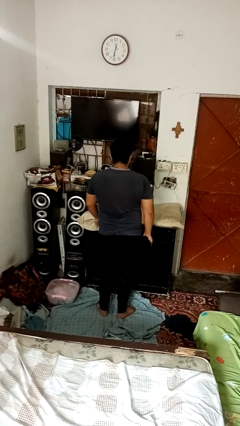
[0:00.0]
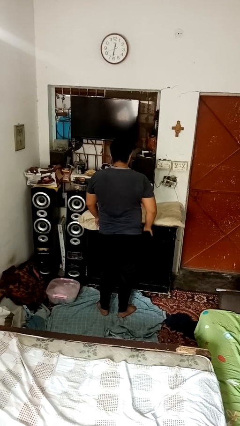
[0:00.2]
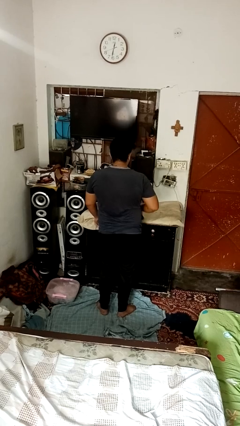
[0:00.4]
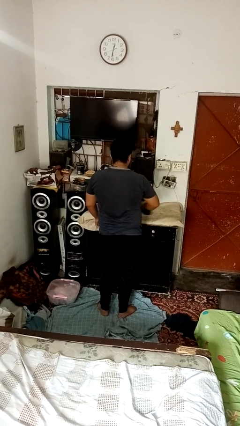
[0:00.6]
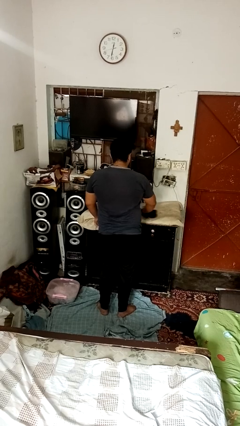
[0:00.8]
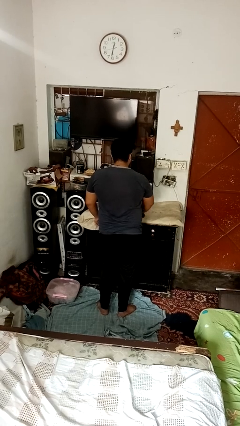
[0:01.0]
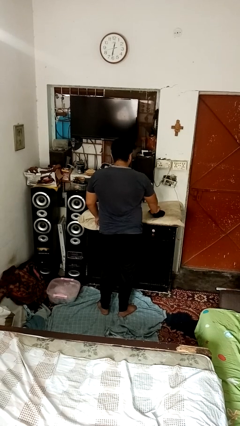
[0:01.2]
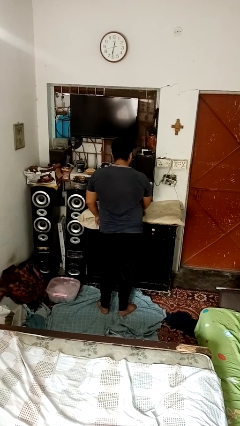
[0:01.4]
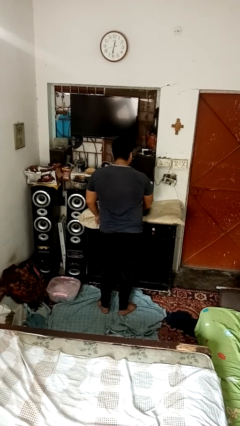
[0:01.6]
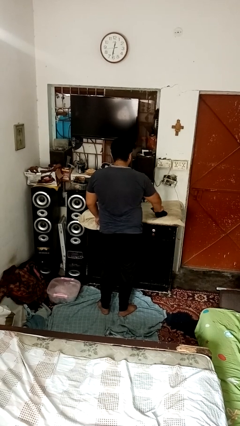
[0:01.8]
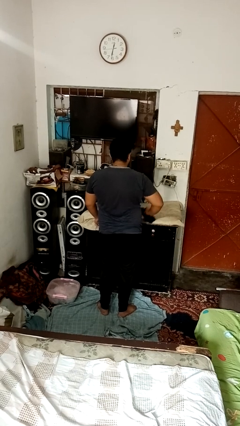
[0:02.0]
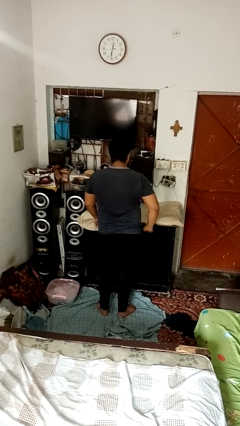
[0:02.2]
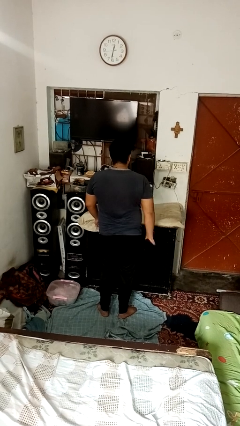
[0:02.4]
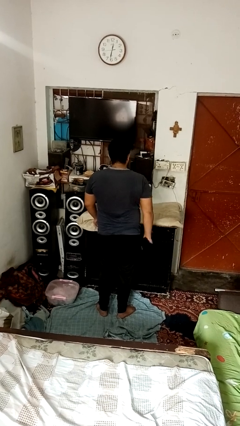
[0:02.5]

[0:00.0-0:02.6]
person cleans table with rag

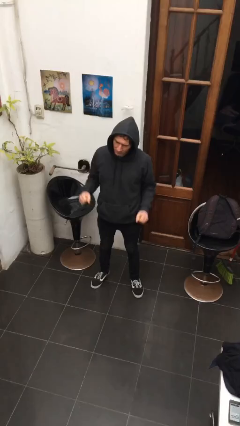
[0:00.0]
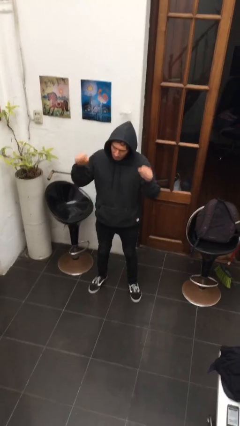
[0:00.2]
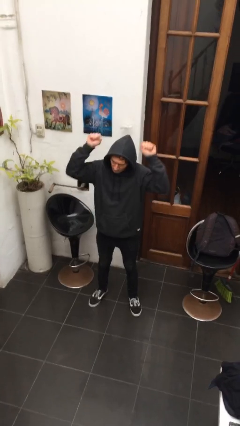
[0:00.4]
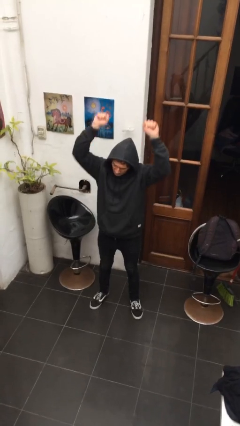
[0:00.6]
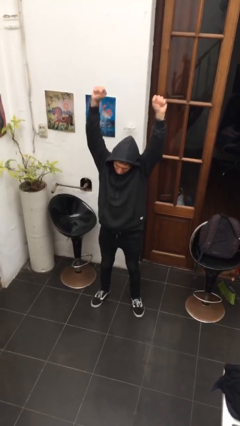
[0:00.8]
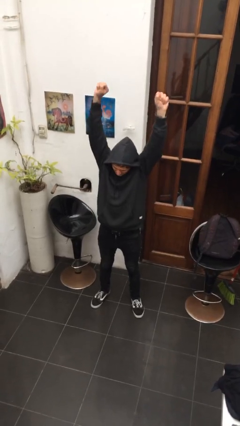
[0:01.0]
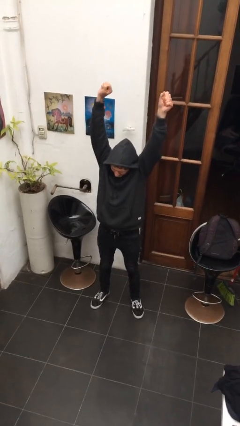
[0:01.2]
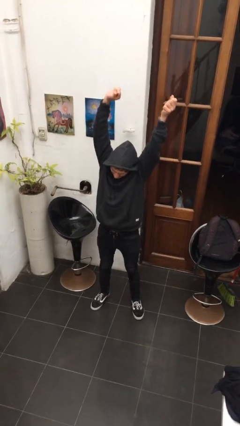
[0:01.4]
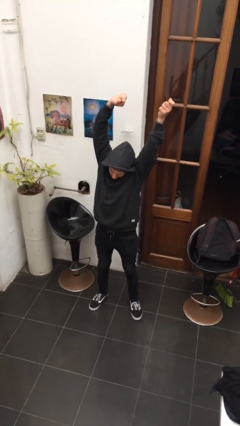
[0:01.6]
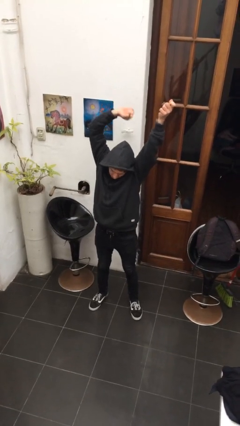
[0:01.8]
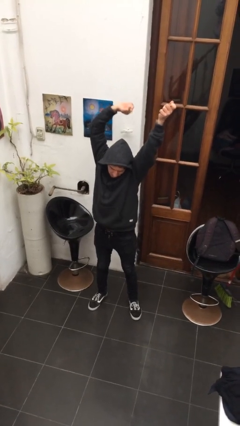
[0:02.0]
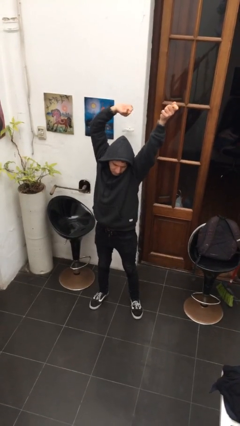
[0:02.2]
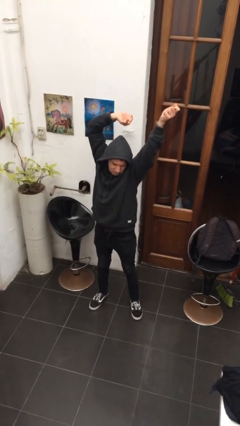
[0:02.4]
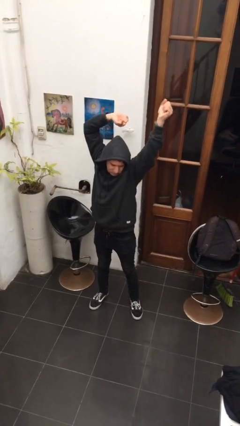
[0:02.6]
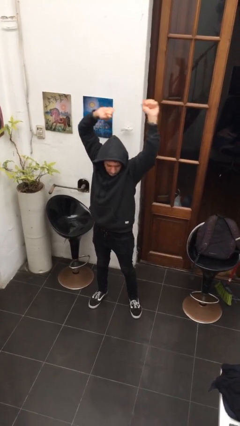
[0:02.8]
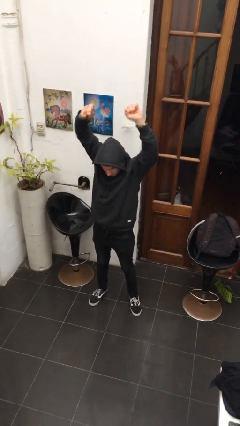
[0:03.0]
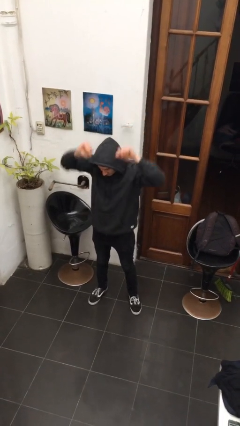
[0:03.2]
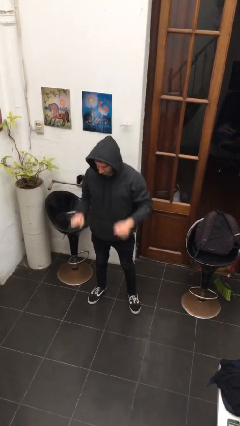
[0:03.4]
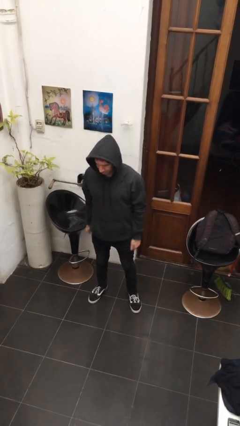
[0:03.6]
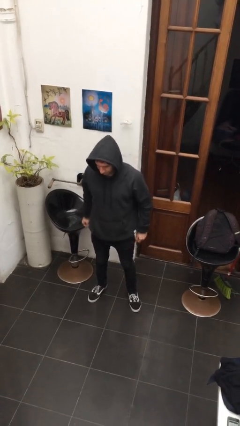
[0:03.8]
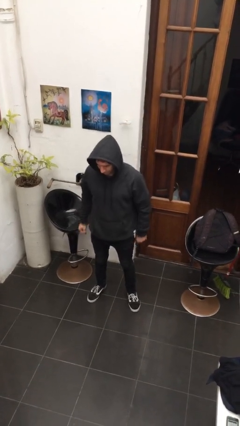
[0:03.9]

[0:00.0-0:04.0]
person stretches arms over head

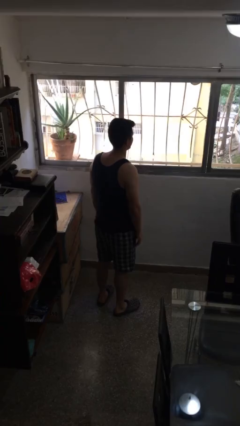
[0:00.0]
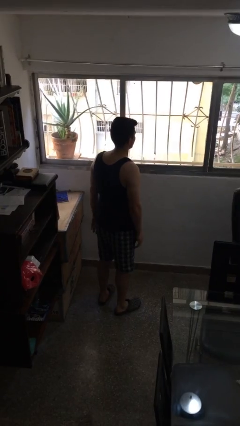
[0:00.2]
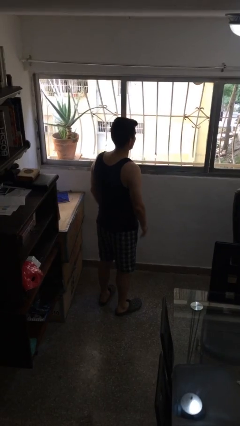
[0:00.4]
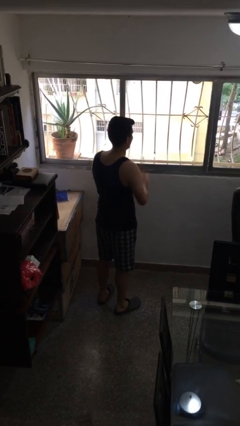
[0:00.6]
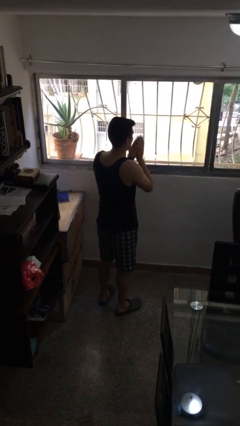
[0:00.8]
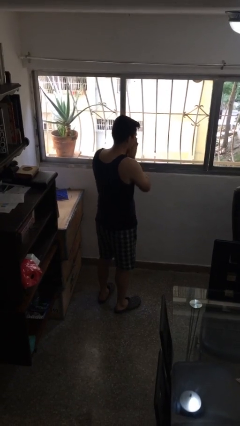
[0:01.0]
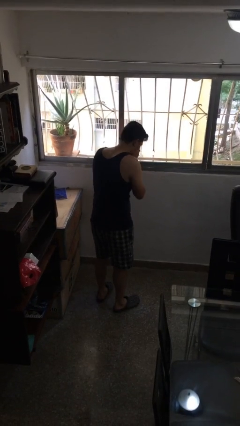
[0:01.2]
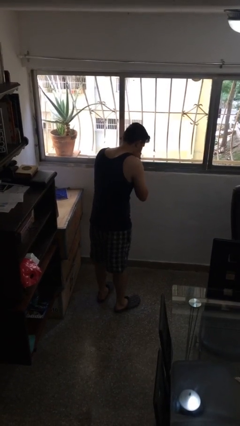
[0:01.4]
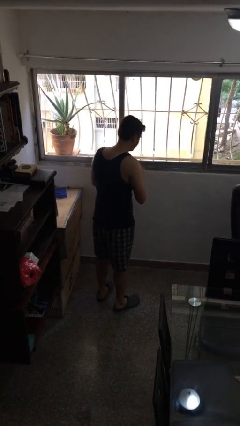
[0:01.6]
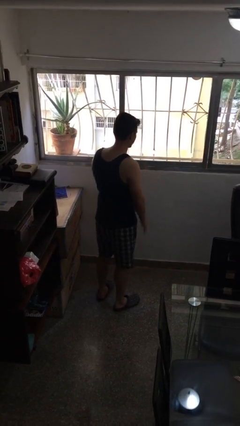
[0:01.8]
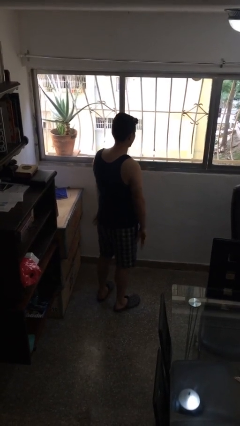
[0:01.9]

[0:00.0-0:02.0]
person sneezes into hand

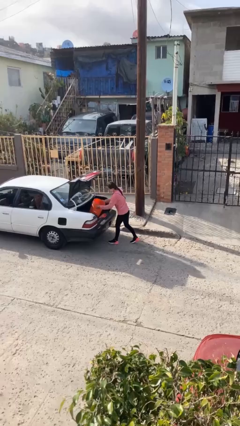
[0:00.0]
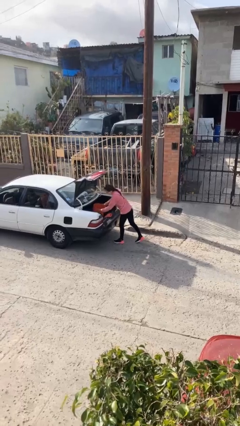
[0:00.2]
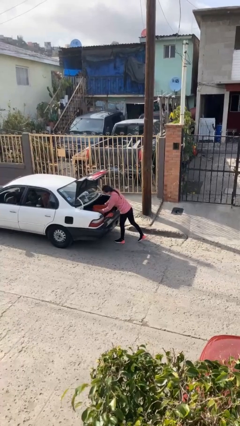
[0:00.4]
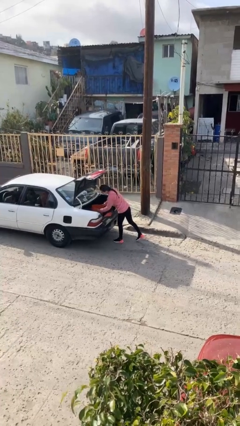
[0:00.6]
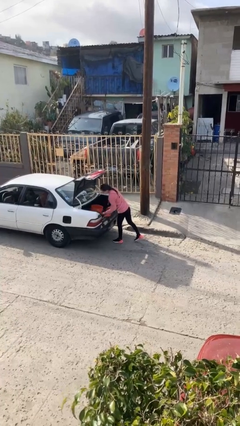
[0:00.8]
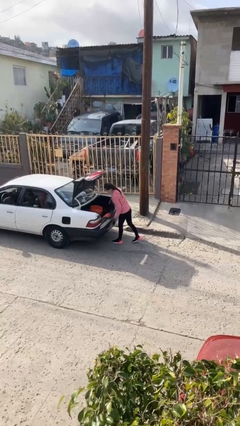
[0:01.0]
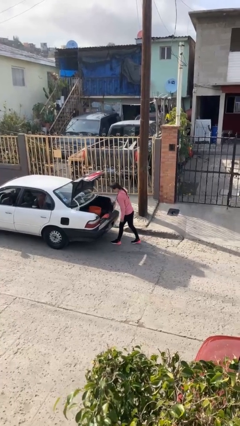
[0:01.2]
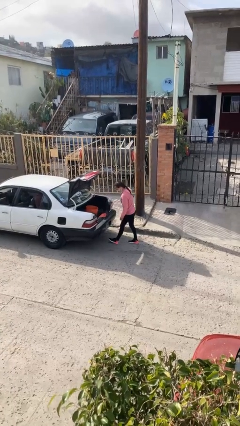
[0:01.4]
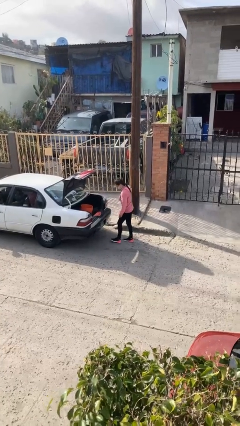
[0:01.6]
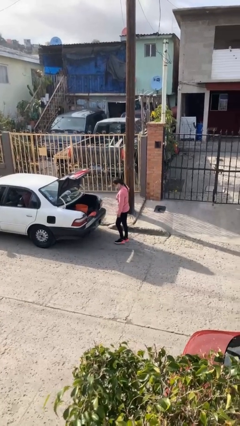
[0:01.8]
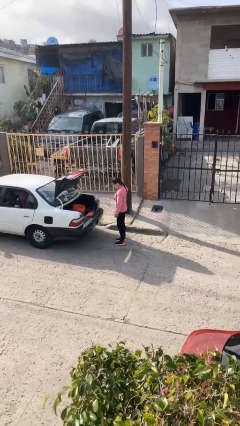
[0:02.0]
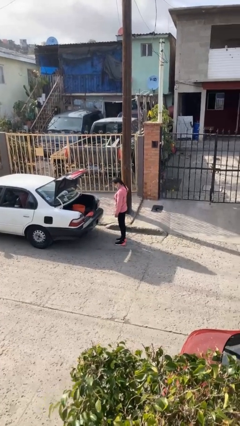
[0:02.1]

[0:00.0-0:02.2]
person loads car

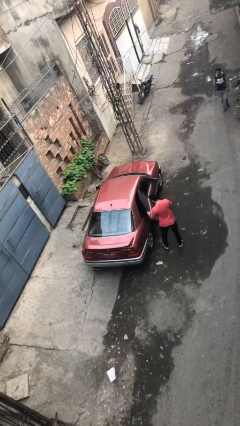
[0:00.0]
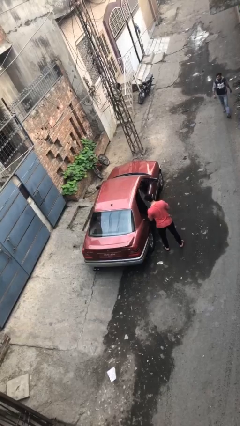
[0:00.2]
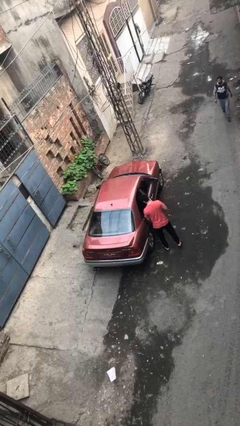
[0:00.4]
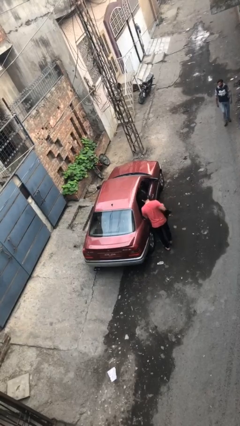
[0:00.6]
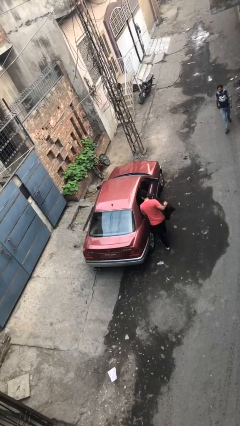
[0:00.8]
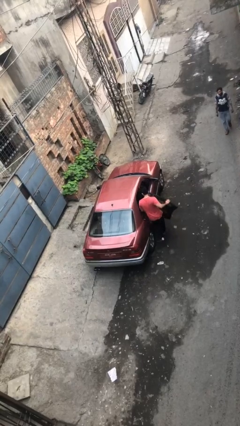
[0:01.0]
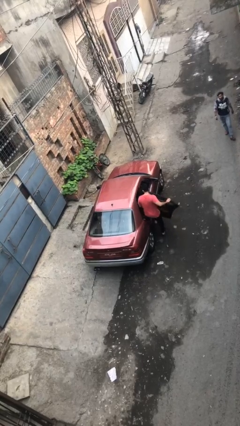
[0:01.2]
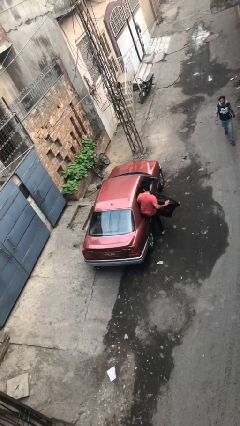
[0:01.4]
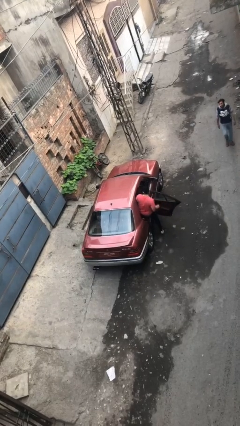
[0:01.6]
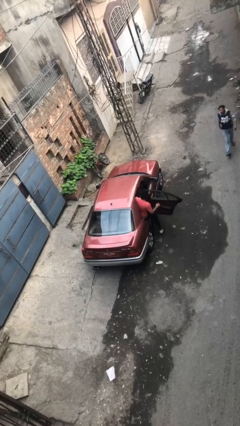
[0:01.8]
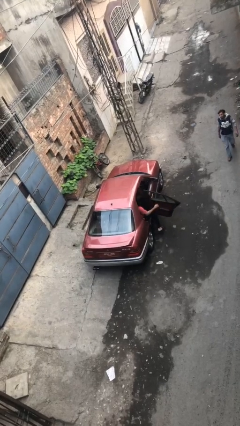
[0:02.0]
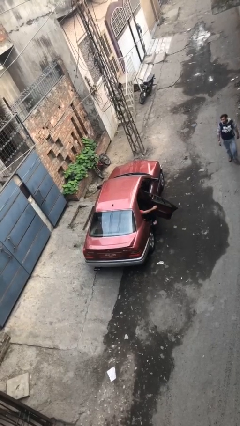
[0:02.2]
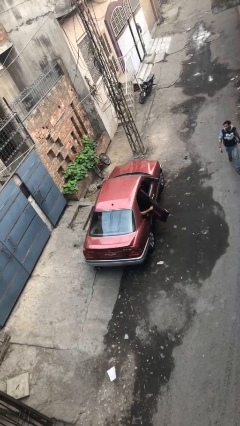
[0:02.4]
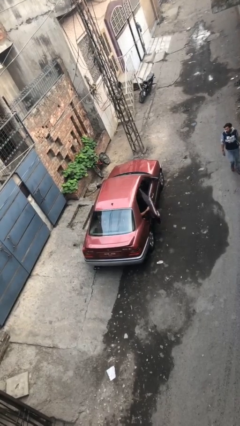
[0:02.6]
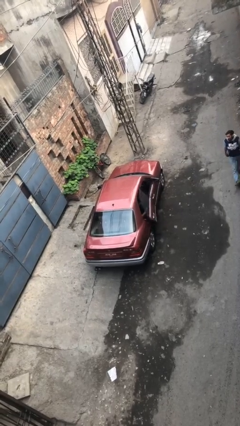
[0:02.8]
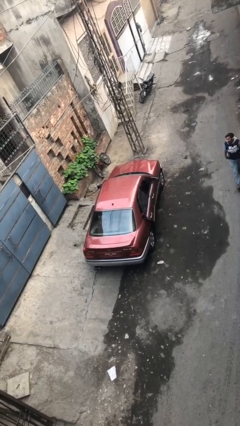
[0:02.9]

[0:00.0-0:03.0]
car picks up person

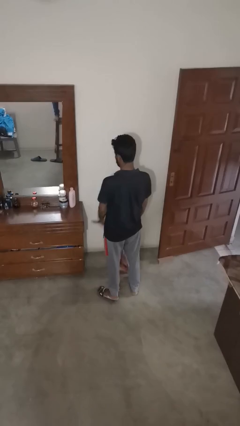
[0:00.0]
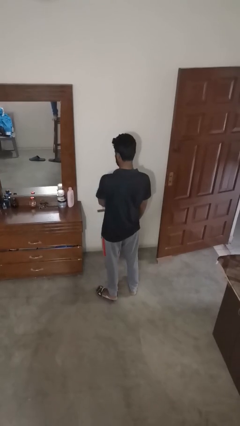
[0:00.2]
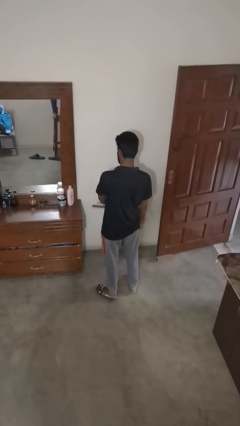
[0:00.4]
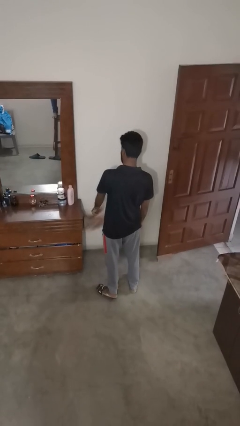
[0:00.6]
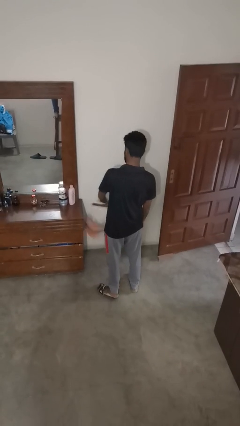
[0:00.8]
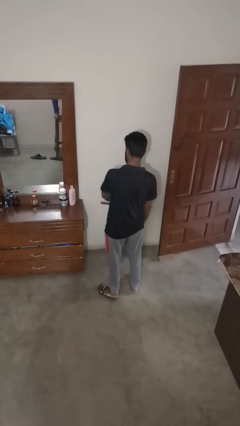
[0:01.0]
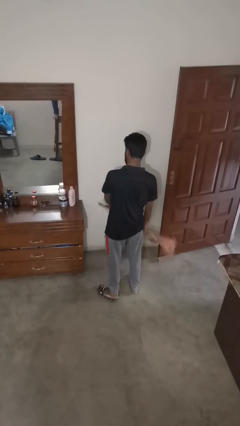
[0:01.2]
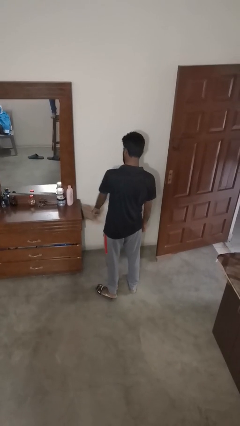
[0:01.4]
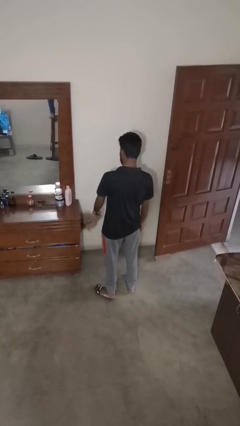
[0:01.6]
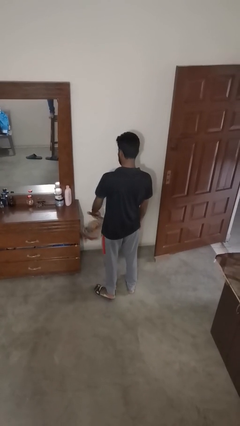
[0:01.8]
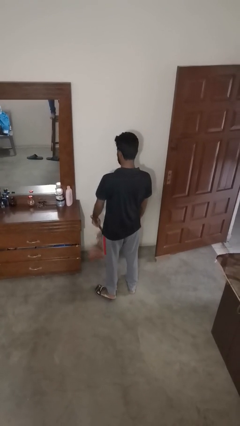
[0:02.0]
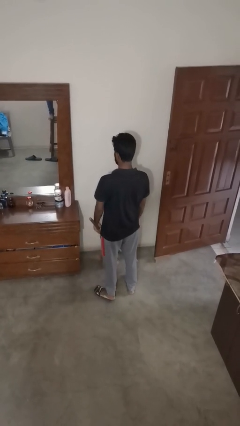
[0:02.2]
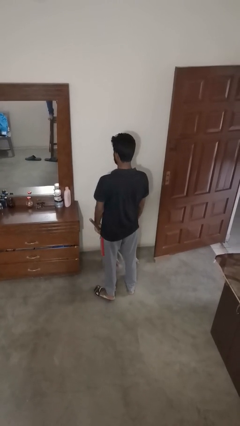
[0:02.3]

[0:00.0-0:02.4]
person dusts furniture

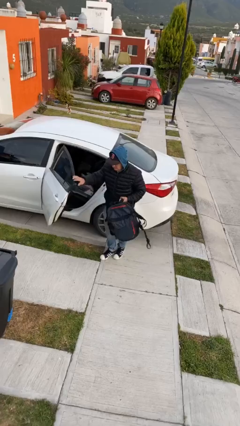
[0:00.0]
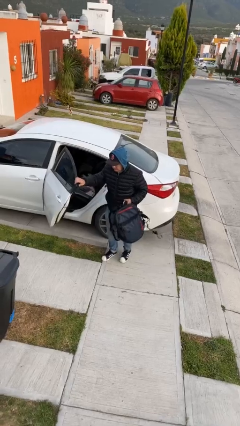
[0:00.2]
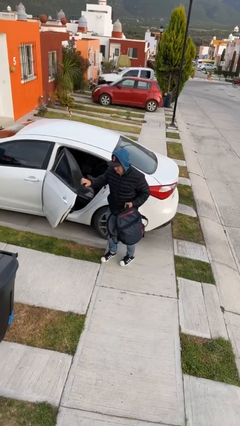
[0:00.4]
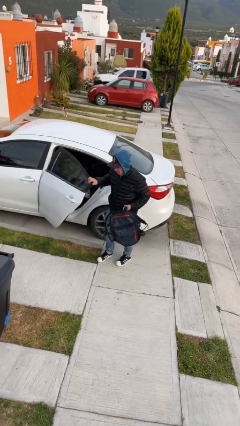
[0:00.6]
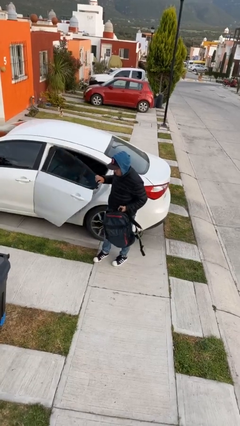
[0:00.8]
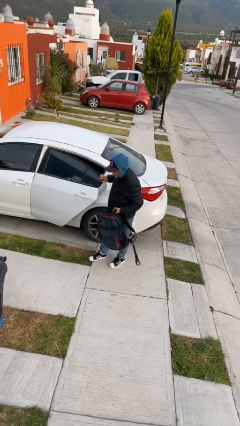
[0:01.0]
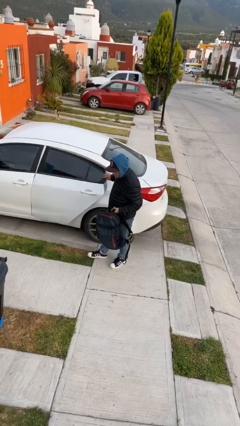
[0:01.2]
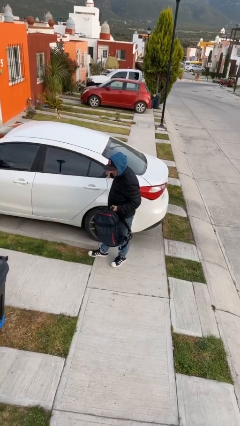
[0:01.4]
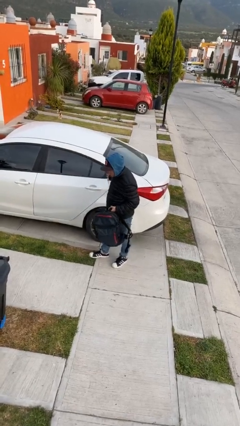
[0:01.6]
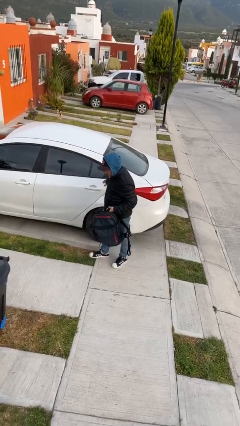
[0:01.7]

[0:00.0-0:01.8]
person closes car door
